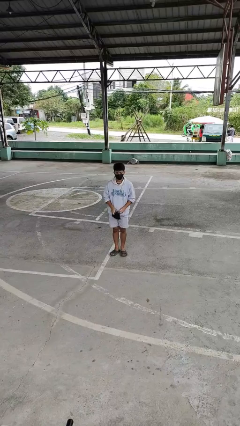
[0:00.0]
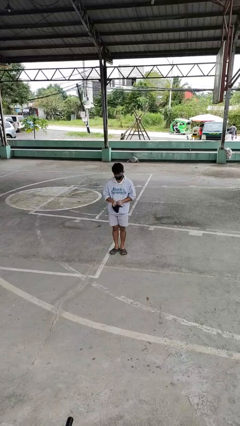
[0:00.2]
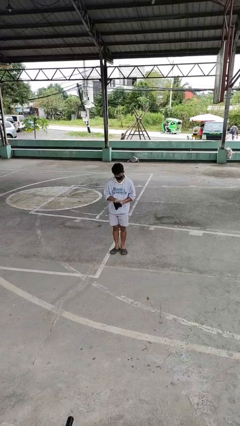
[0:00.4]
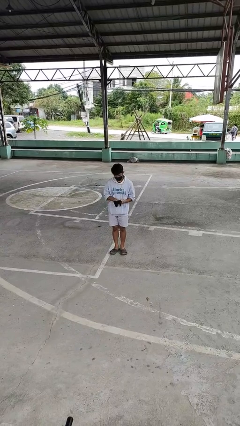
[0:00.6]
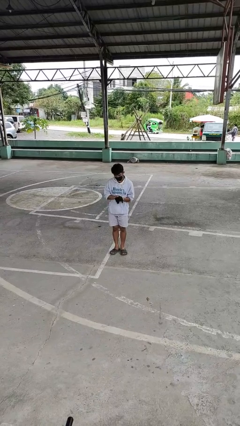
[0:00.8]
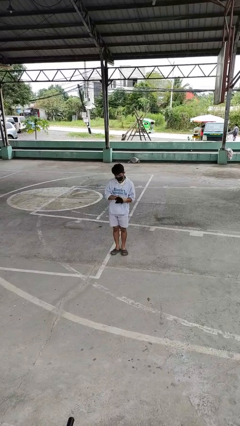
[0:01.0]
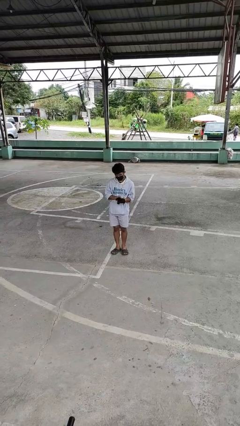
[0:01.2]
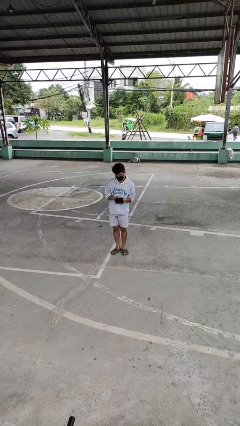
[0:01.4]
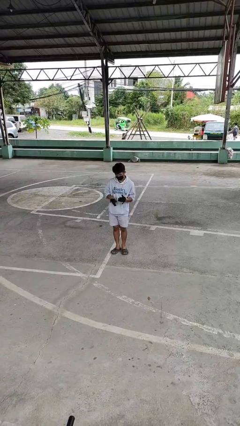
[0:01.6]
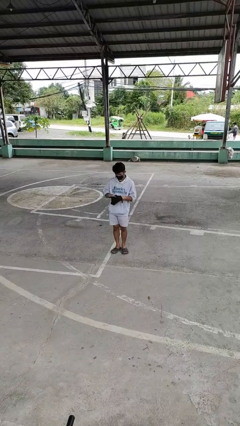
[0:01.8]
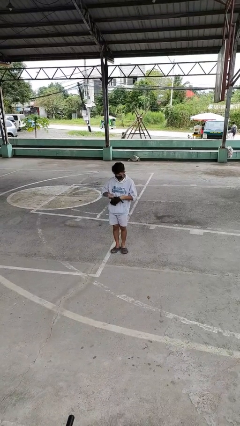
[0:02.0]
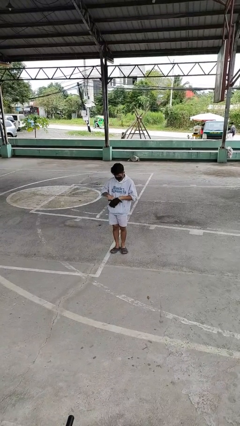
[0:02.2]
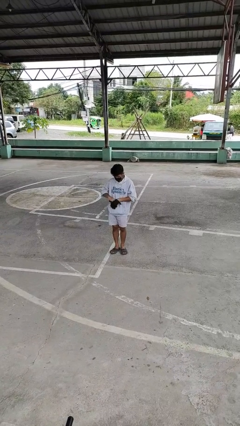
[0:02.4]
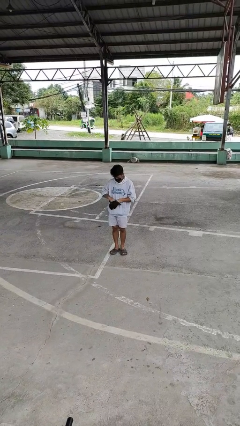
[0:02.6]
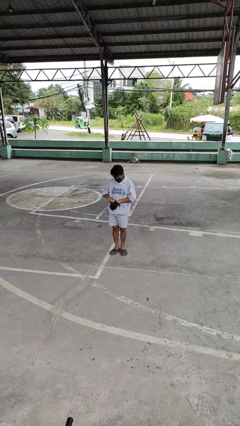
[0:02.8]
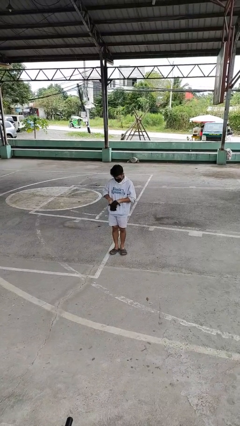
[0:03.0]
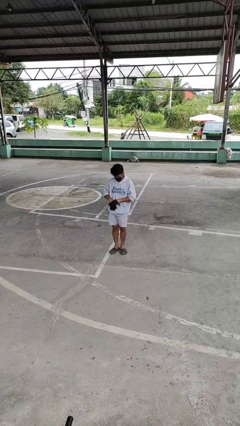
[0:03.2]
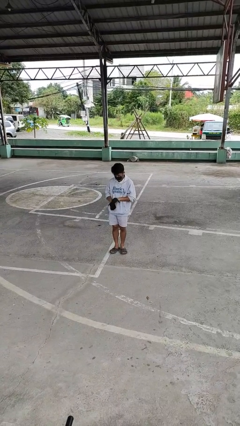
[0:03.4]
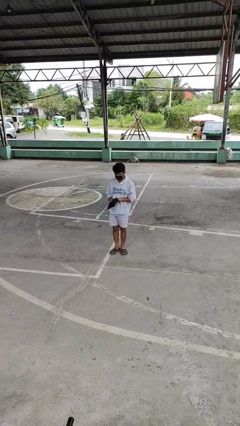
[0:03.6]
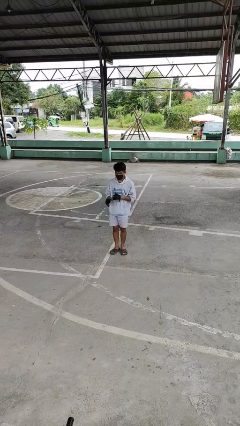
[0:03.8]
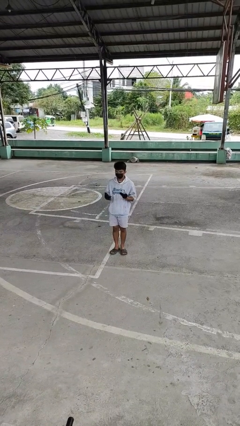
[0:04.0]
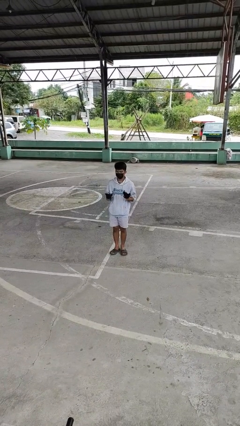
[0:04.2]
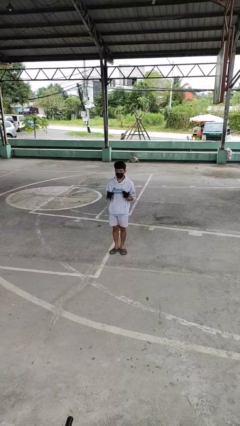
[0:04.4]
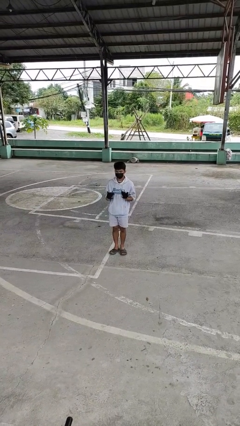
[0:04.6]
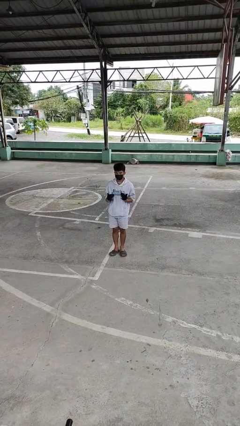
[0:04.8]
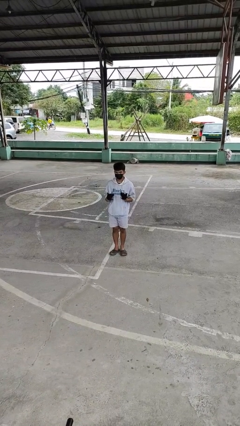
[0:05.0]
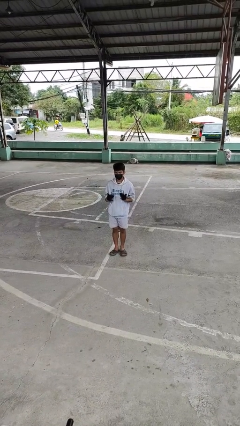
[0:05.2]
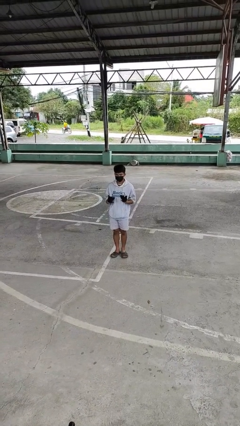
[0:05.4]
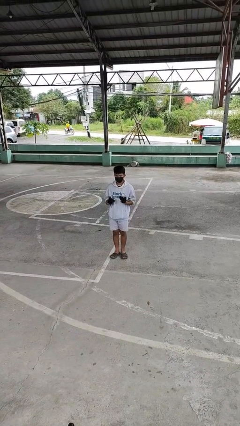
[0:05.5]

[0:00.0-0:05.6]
person puts on gloves

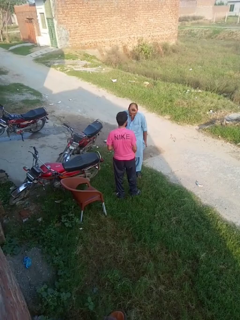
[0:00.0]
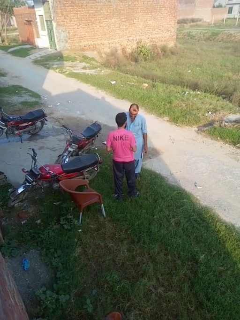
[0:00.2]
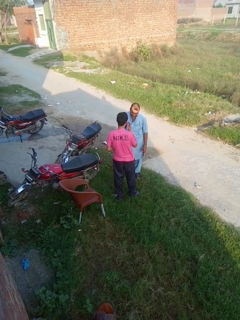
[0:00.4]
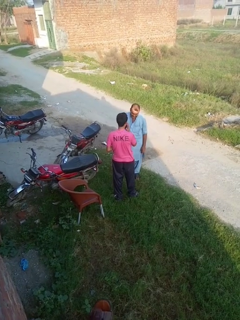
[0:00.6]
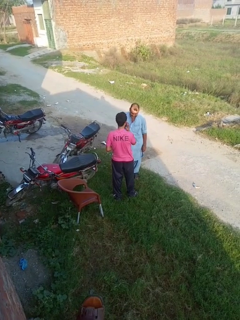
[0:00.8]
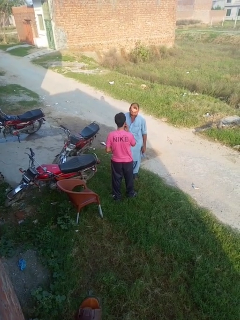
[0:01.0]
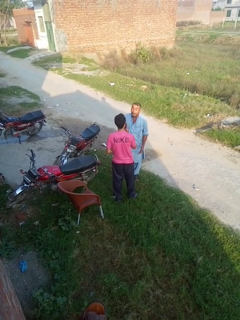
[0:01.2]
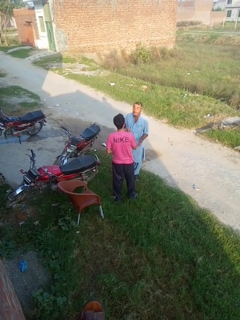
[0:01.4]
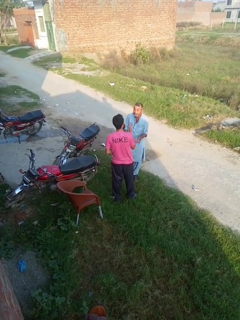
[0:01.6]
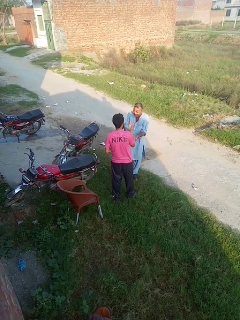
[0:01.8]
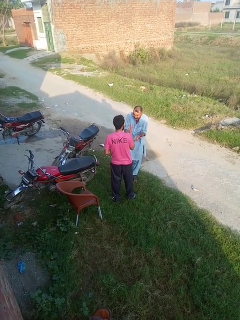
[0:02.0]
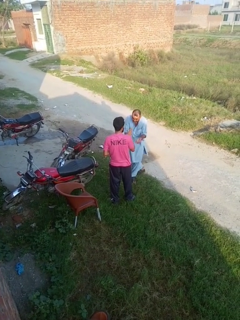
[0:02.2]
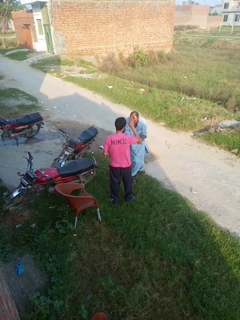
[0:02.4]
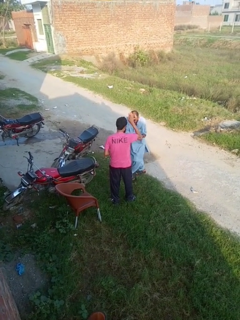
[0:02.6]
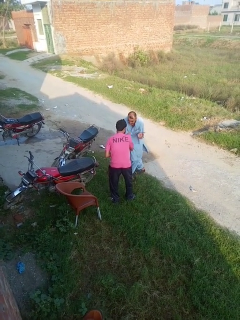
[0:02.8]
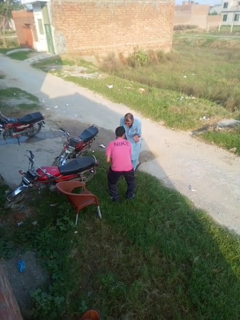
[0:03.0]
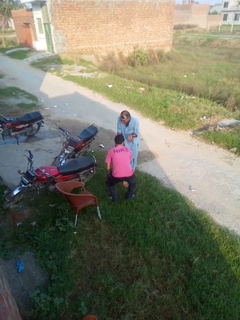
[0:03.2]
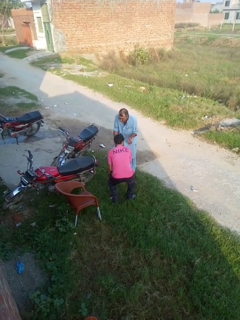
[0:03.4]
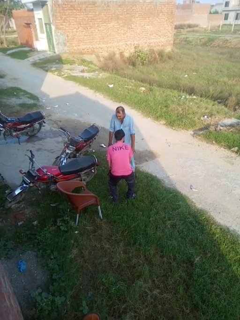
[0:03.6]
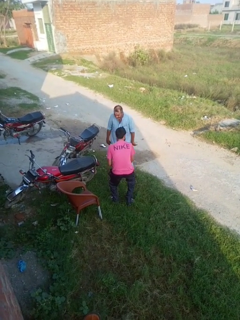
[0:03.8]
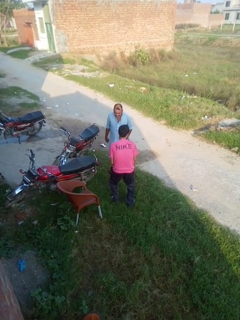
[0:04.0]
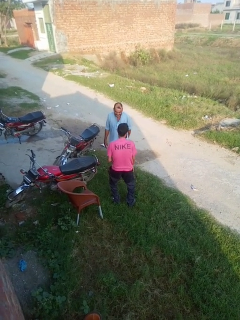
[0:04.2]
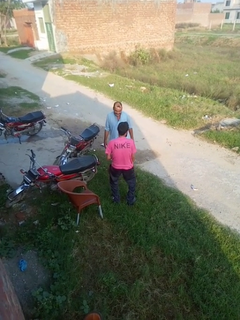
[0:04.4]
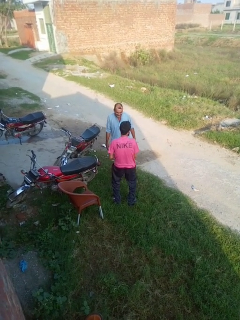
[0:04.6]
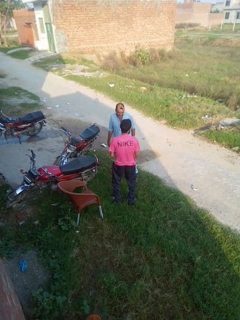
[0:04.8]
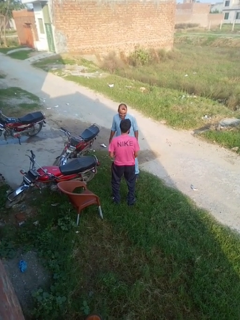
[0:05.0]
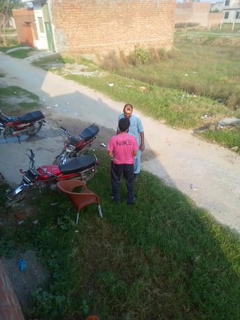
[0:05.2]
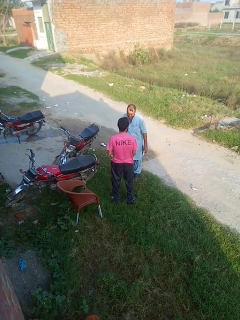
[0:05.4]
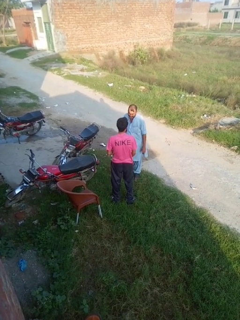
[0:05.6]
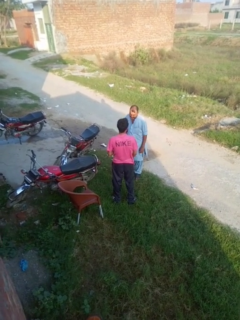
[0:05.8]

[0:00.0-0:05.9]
person laughs with person

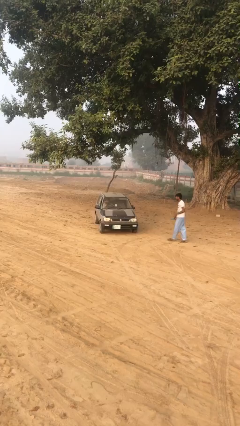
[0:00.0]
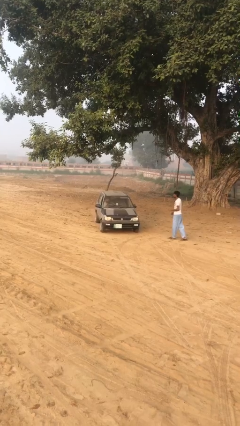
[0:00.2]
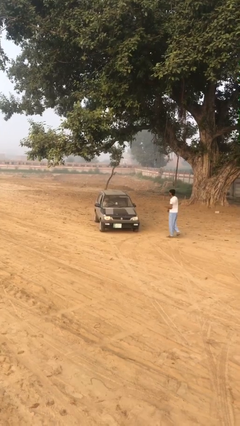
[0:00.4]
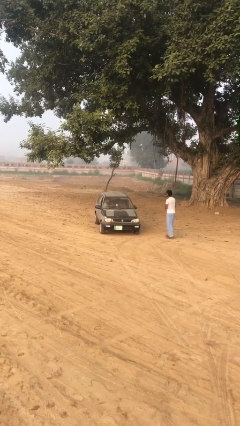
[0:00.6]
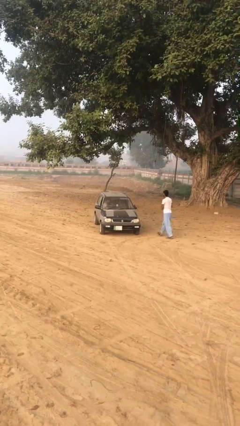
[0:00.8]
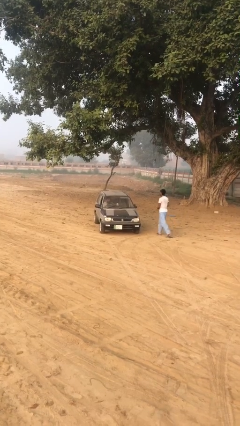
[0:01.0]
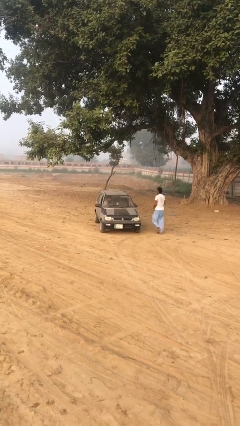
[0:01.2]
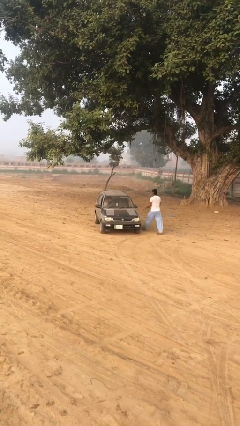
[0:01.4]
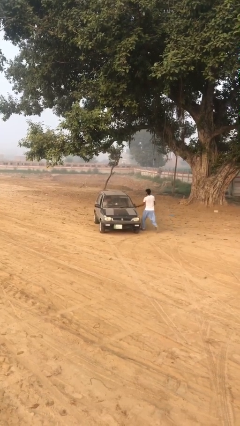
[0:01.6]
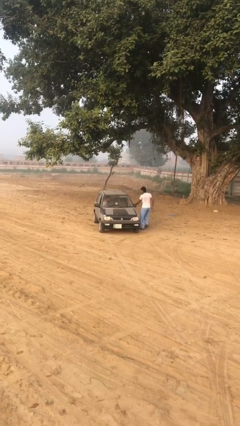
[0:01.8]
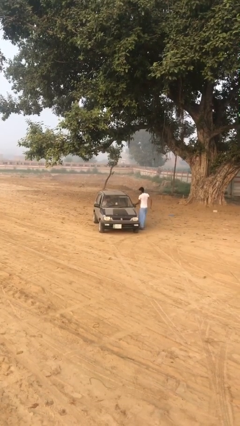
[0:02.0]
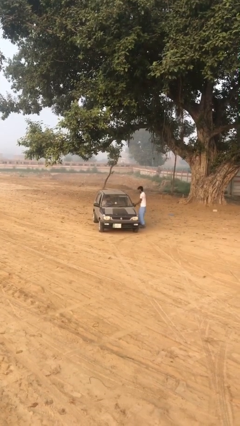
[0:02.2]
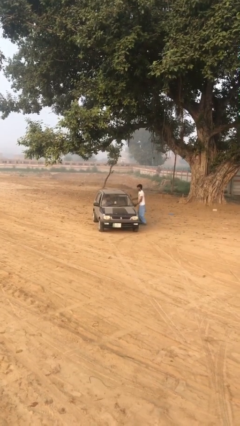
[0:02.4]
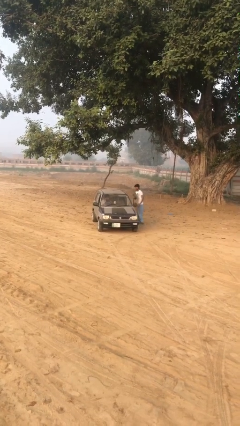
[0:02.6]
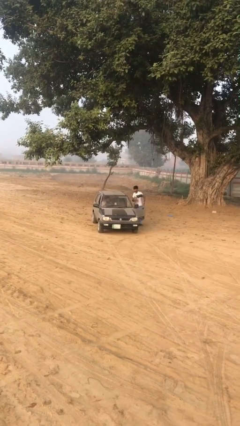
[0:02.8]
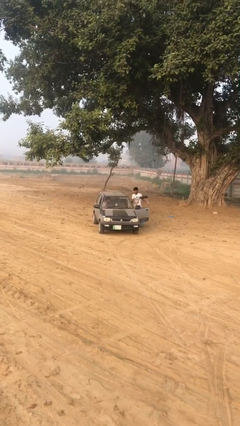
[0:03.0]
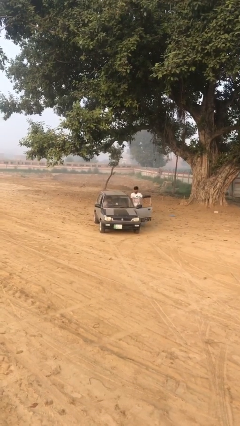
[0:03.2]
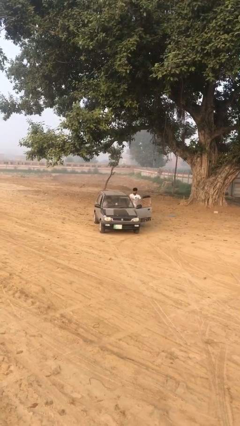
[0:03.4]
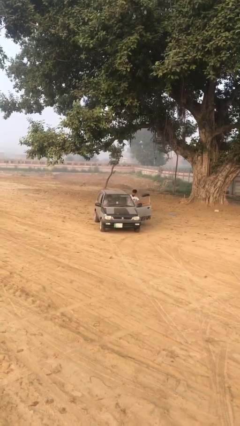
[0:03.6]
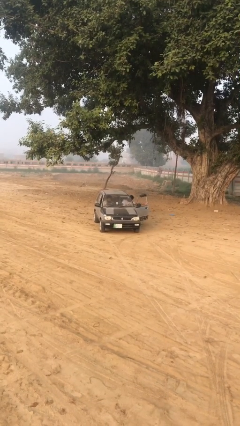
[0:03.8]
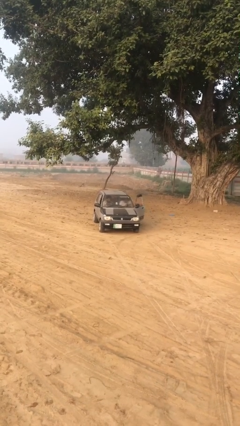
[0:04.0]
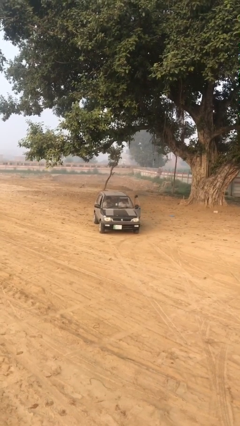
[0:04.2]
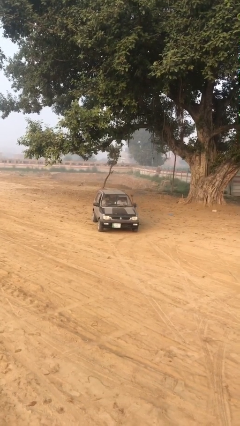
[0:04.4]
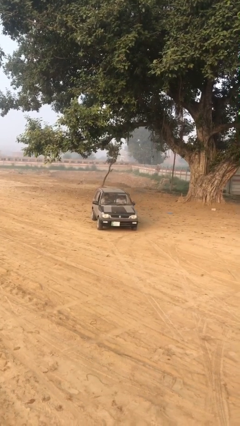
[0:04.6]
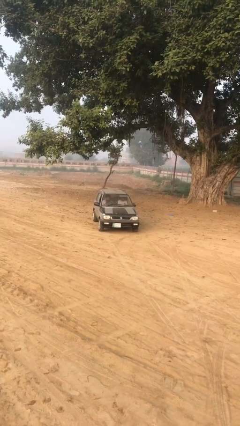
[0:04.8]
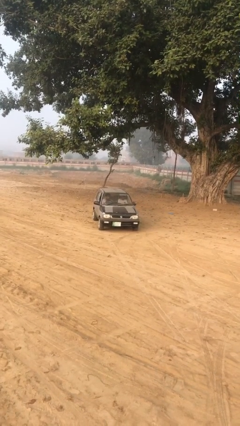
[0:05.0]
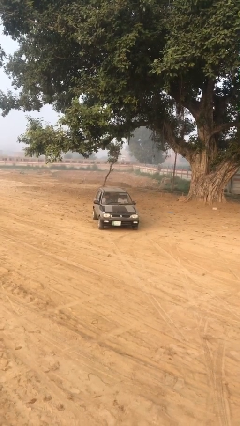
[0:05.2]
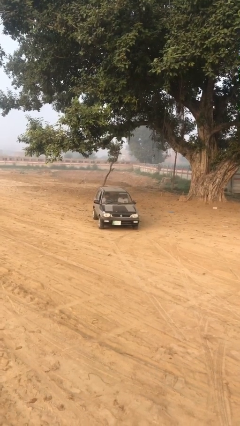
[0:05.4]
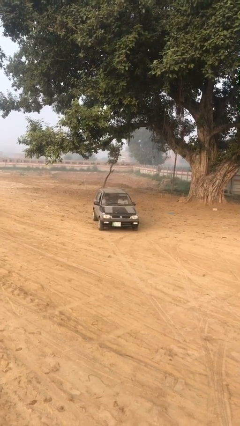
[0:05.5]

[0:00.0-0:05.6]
car picks up person

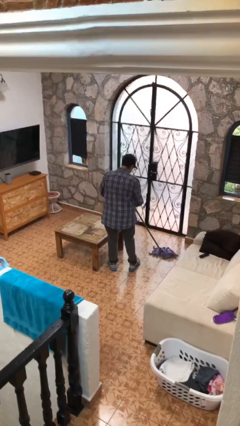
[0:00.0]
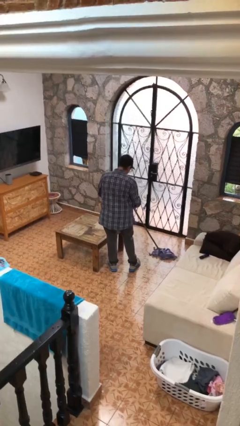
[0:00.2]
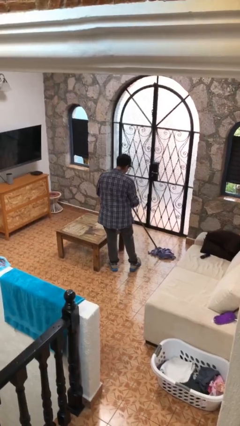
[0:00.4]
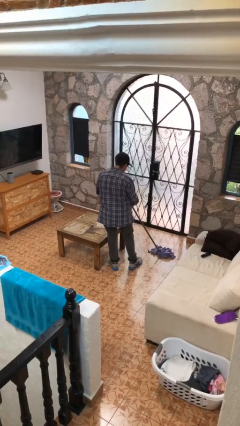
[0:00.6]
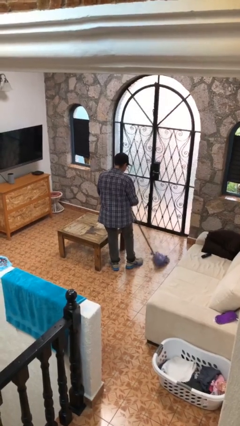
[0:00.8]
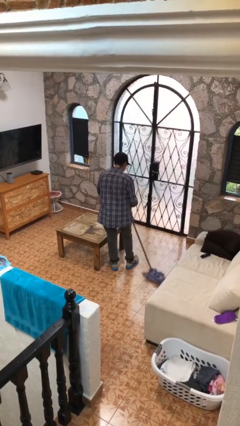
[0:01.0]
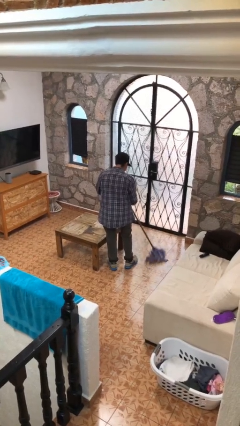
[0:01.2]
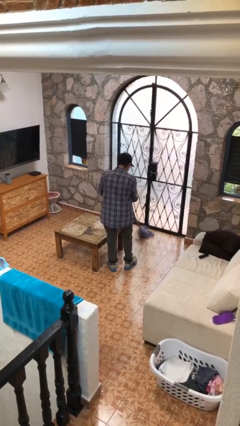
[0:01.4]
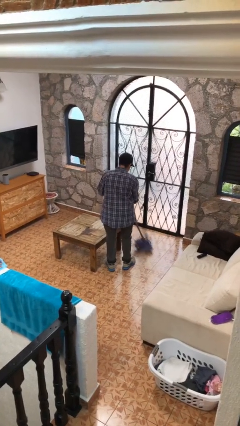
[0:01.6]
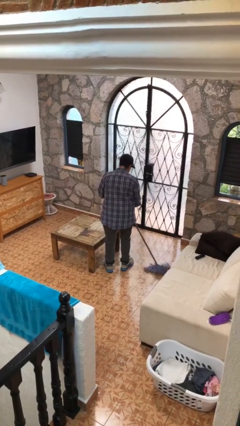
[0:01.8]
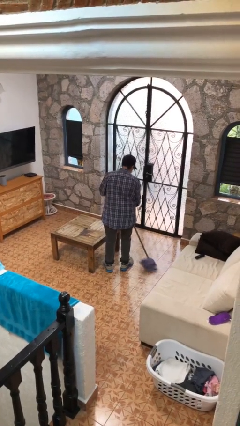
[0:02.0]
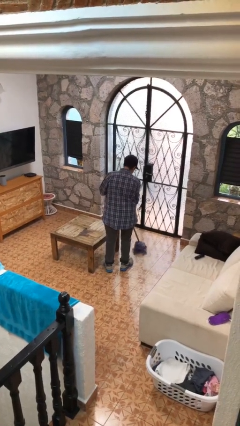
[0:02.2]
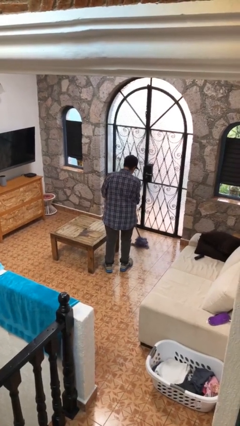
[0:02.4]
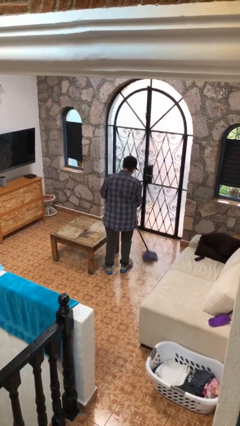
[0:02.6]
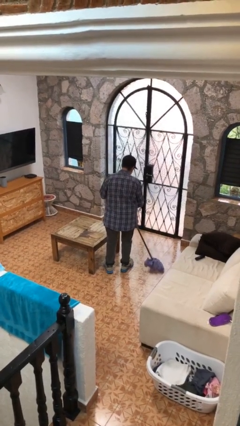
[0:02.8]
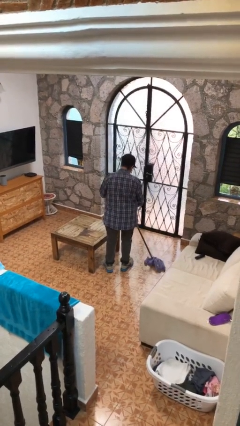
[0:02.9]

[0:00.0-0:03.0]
person mops
